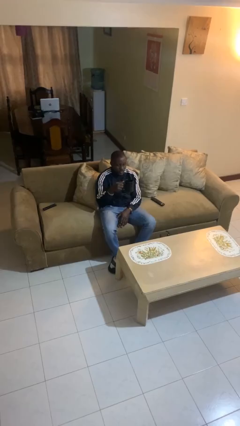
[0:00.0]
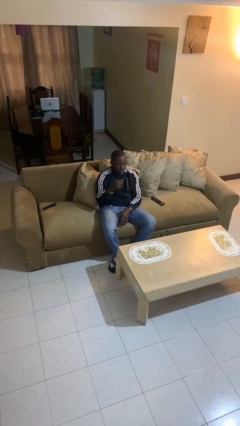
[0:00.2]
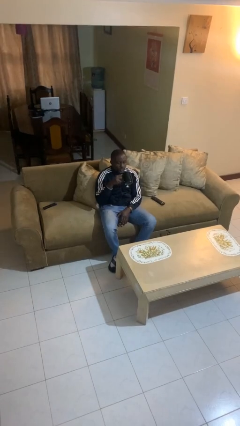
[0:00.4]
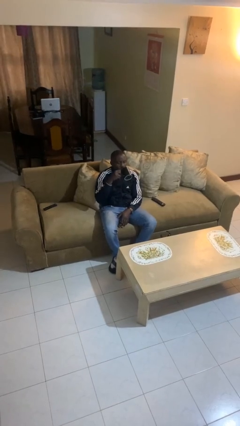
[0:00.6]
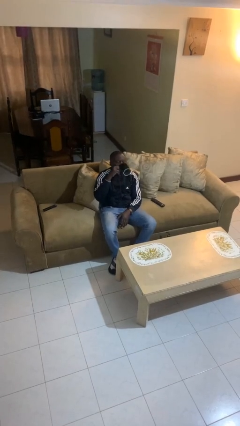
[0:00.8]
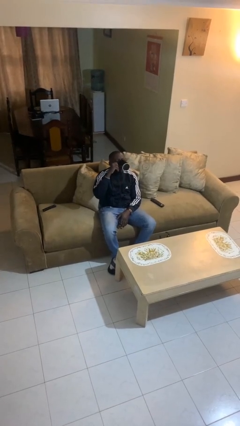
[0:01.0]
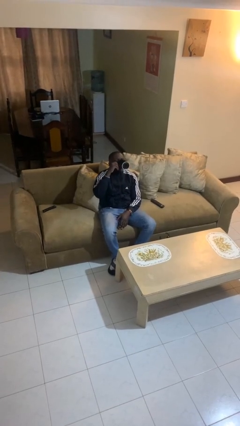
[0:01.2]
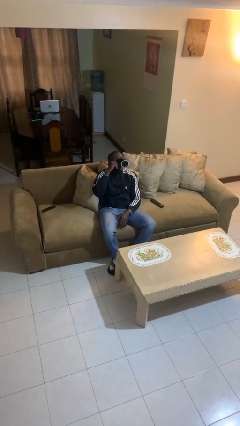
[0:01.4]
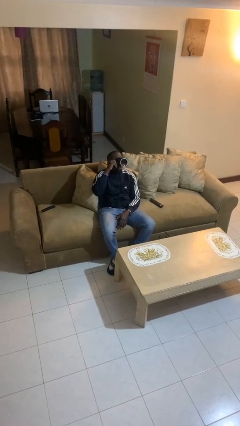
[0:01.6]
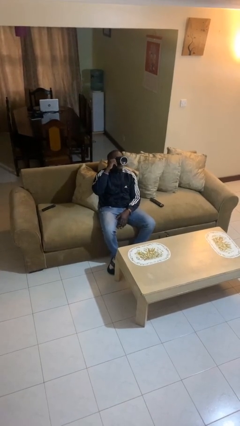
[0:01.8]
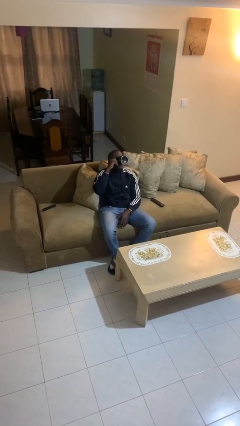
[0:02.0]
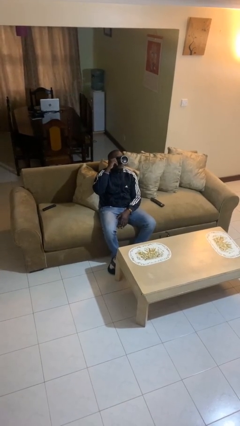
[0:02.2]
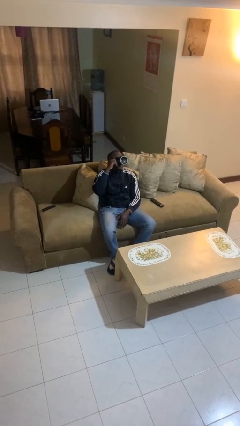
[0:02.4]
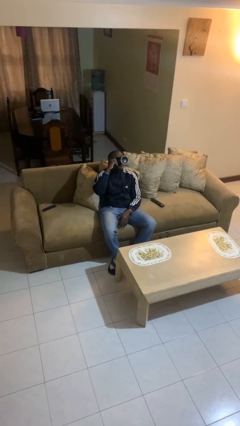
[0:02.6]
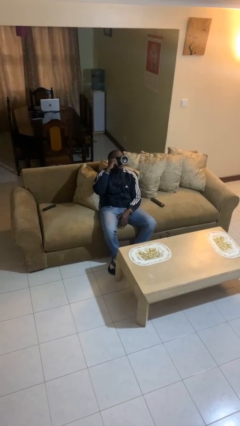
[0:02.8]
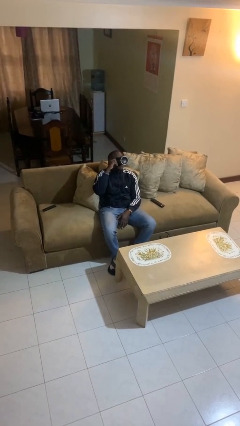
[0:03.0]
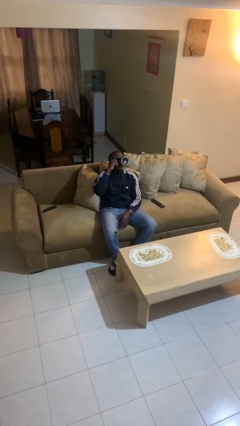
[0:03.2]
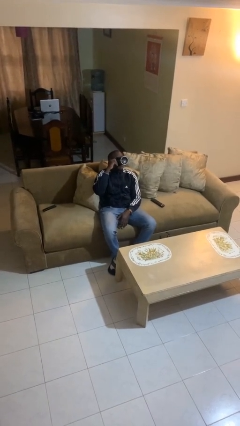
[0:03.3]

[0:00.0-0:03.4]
person drinks from mug

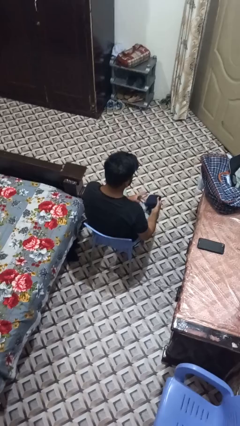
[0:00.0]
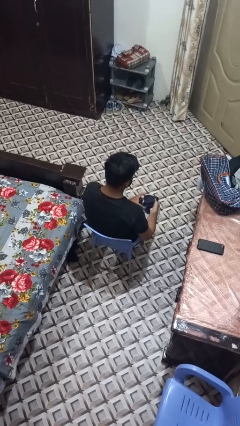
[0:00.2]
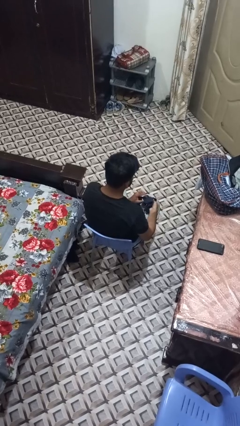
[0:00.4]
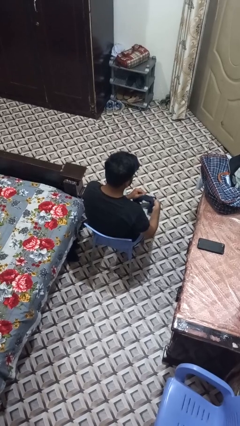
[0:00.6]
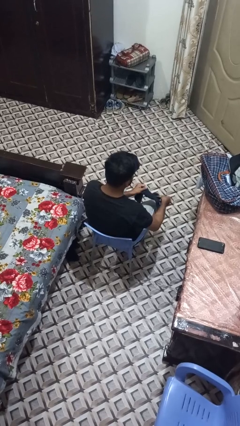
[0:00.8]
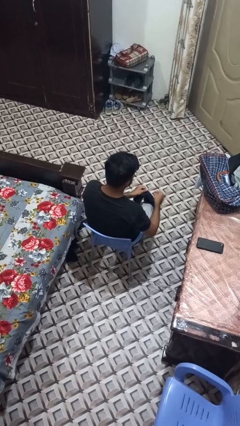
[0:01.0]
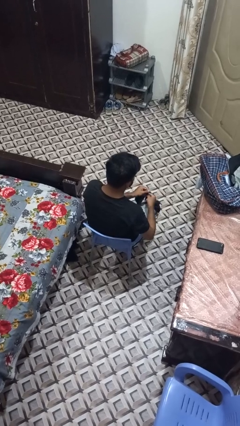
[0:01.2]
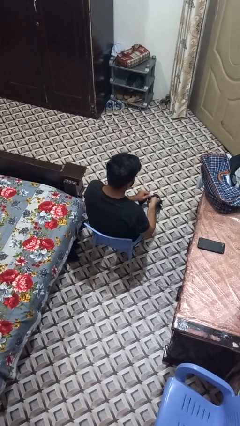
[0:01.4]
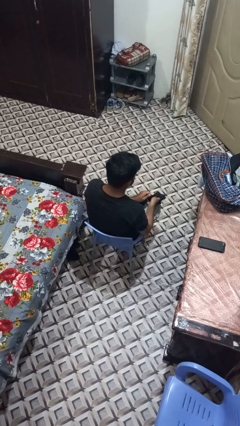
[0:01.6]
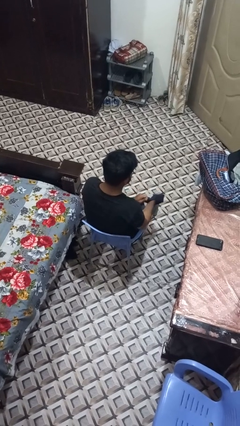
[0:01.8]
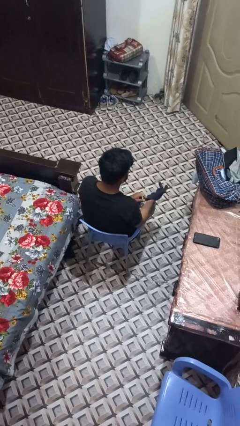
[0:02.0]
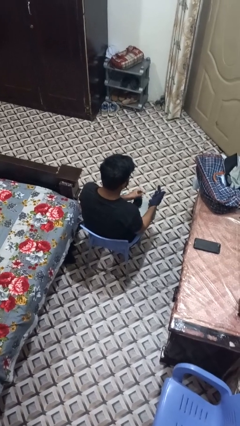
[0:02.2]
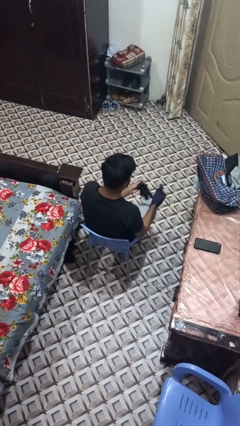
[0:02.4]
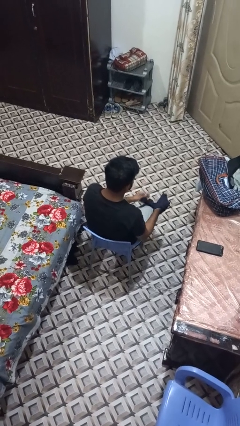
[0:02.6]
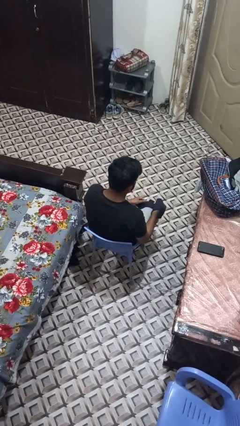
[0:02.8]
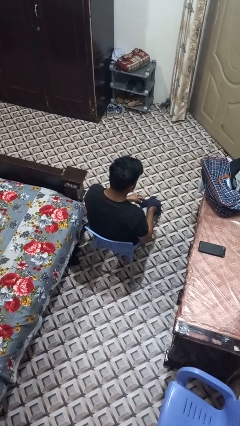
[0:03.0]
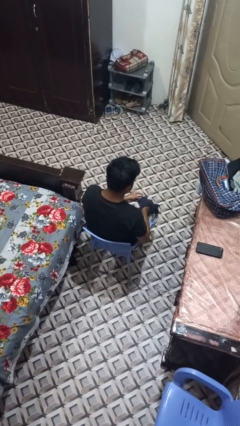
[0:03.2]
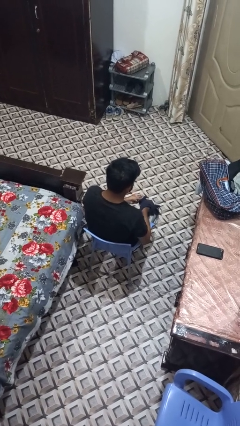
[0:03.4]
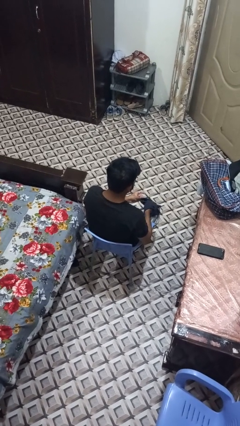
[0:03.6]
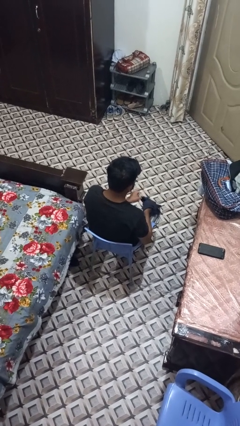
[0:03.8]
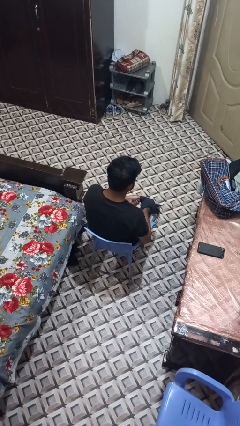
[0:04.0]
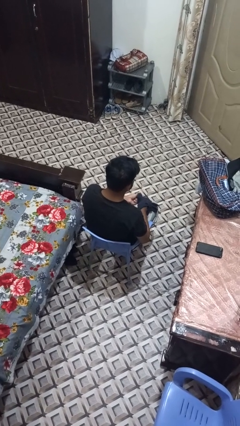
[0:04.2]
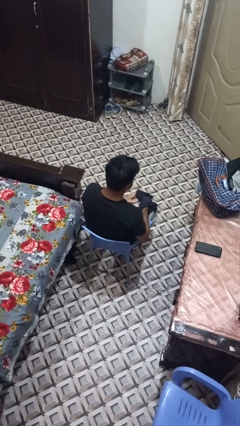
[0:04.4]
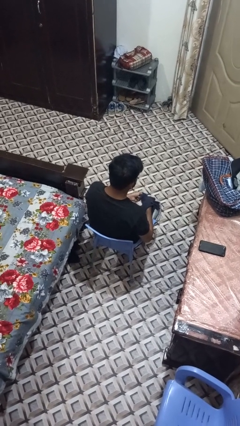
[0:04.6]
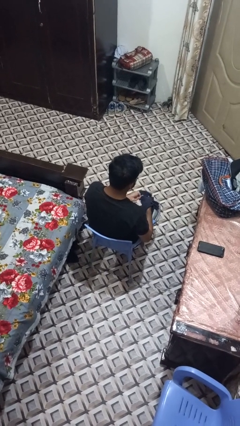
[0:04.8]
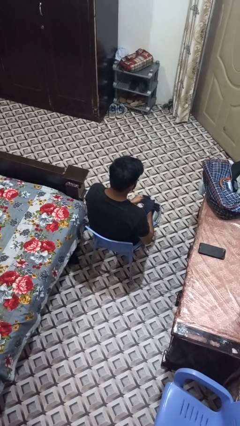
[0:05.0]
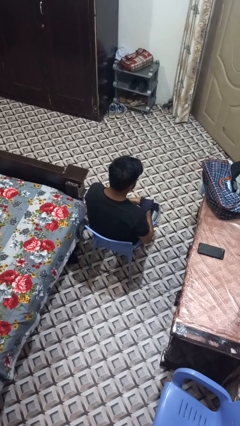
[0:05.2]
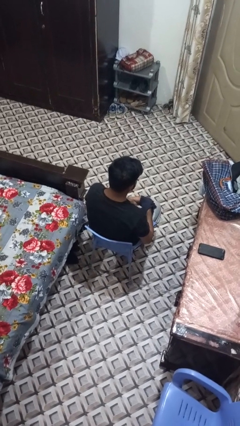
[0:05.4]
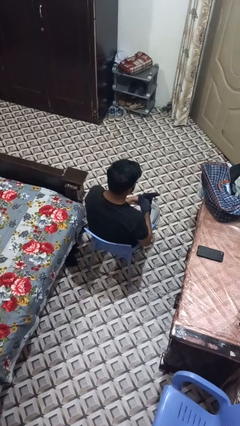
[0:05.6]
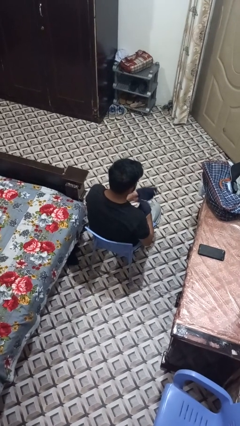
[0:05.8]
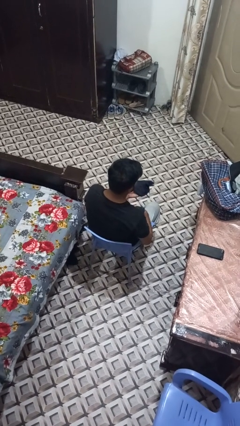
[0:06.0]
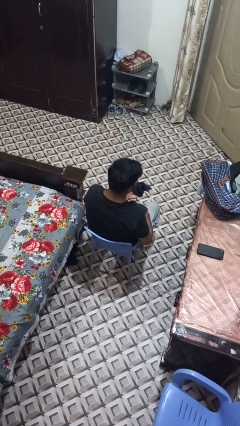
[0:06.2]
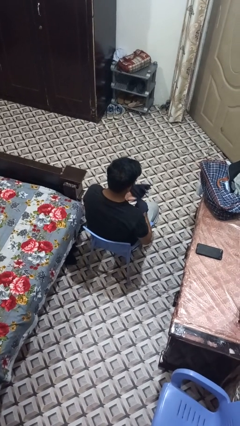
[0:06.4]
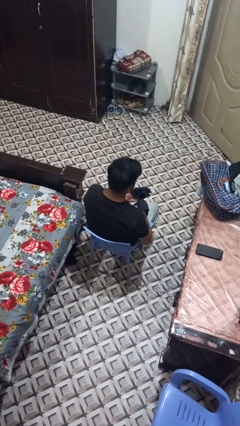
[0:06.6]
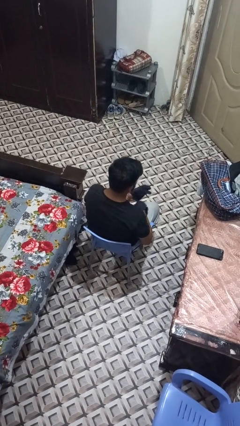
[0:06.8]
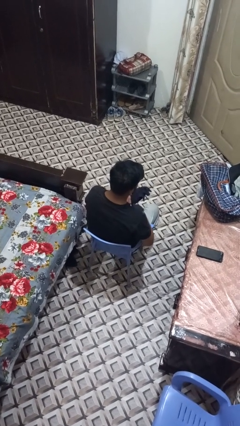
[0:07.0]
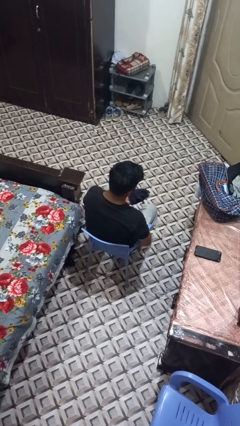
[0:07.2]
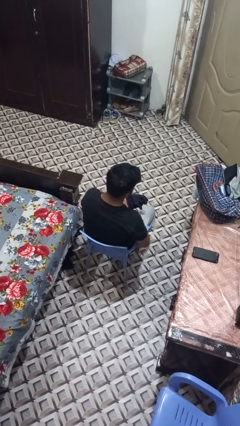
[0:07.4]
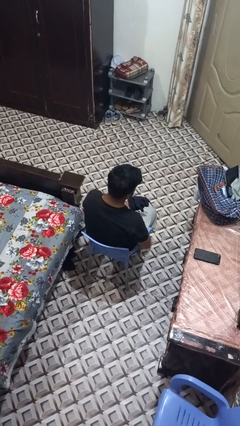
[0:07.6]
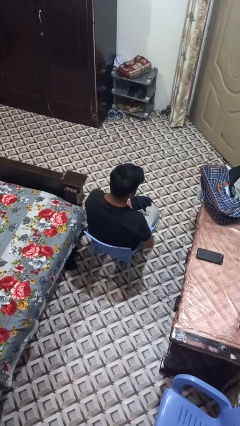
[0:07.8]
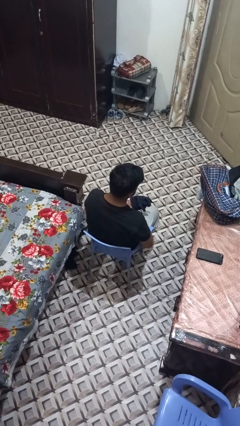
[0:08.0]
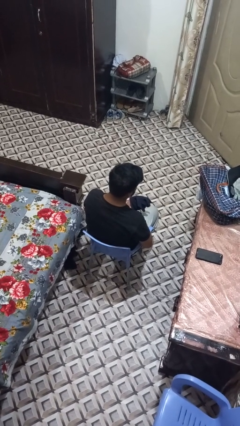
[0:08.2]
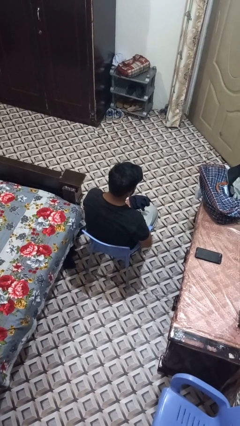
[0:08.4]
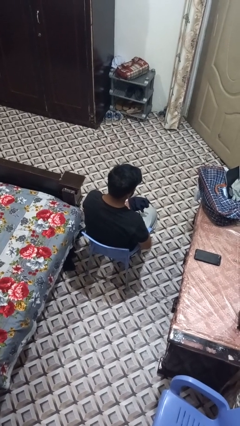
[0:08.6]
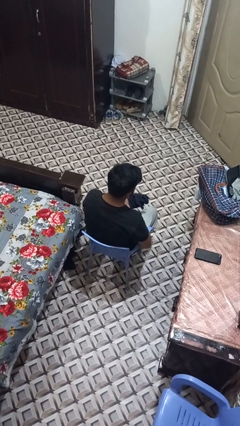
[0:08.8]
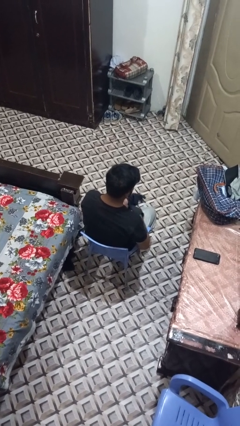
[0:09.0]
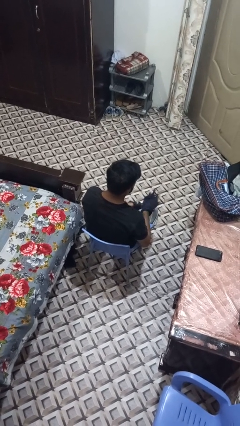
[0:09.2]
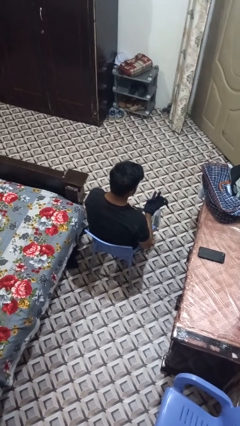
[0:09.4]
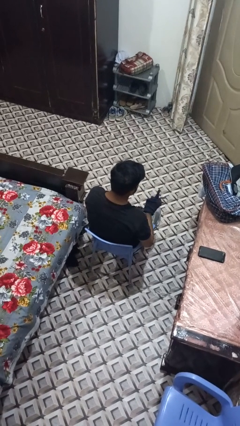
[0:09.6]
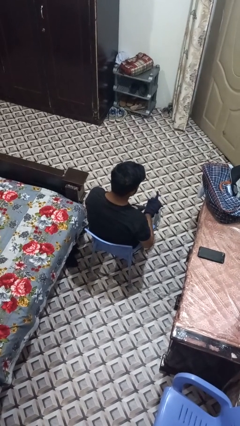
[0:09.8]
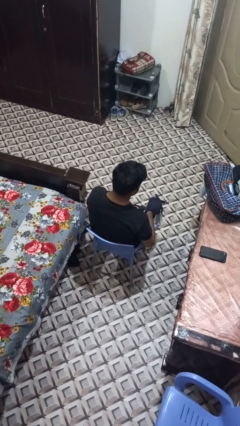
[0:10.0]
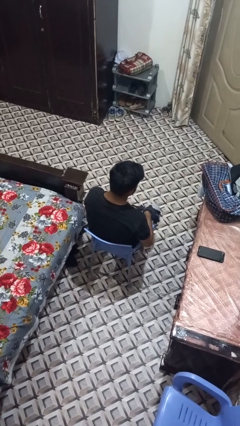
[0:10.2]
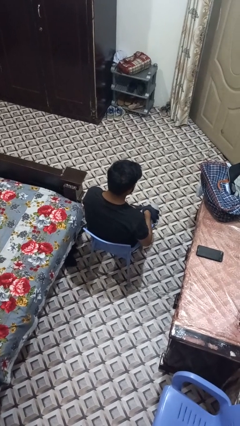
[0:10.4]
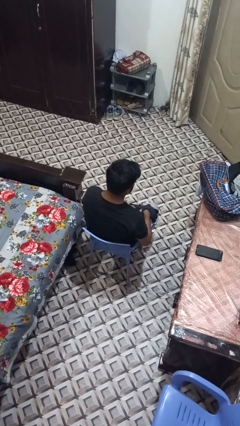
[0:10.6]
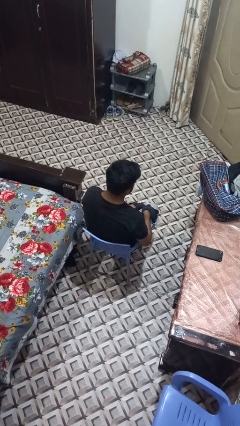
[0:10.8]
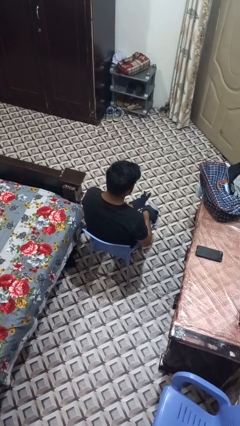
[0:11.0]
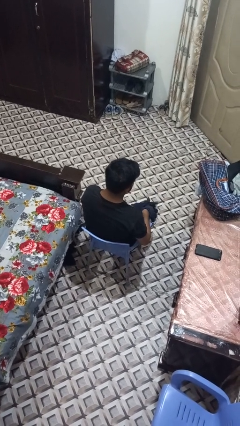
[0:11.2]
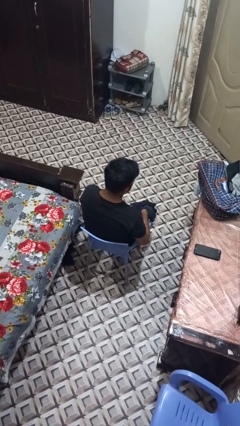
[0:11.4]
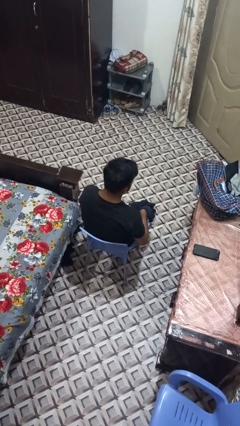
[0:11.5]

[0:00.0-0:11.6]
person puts on gloves

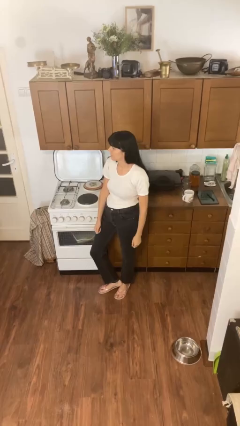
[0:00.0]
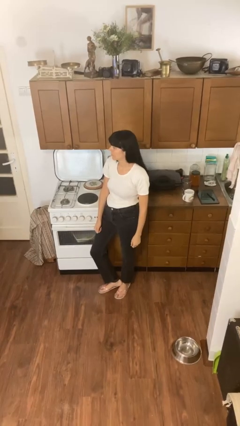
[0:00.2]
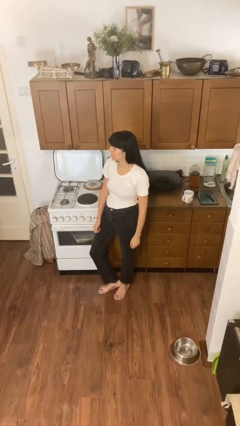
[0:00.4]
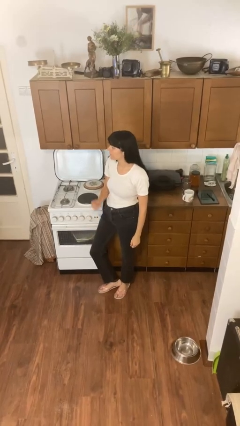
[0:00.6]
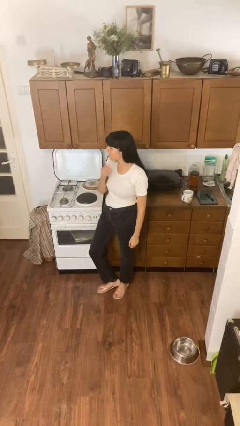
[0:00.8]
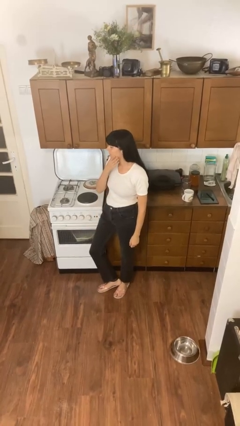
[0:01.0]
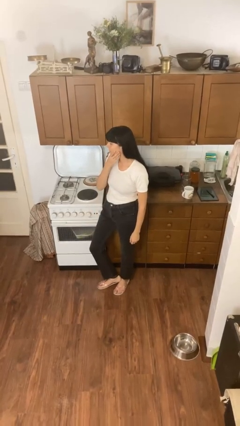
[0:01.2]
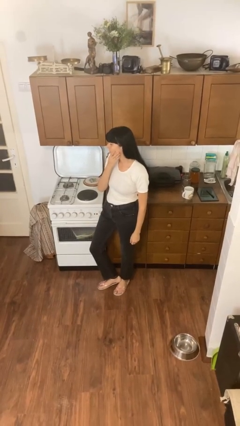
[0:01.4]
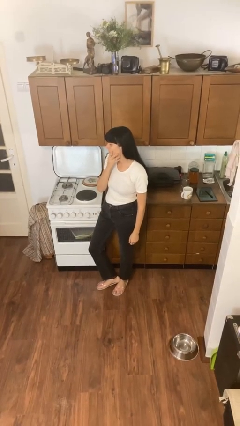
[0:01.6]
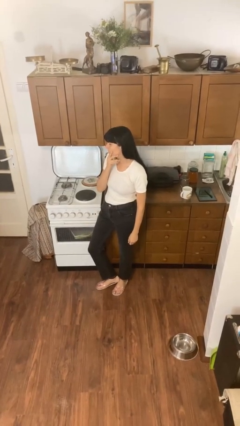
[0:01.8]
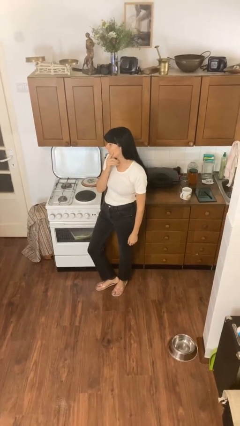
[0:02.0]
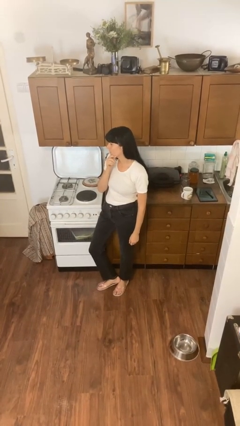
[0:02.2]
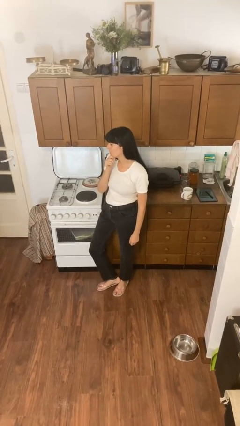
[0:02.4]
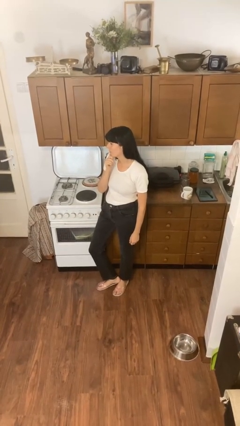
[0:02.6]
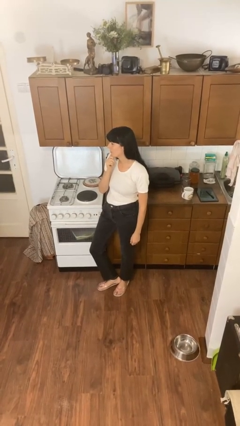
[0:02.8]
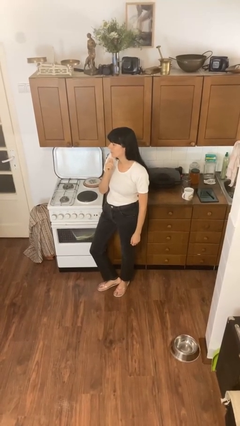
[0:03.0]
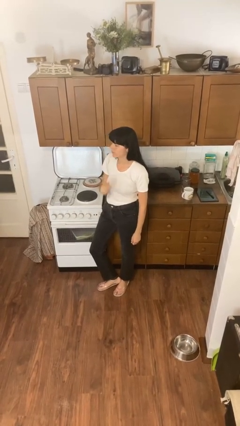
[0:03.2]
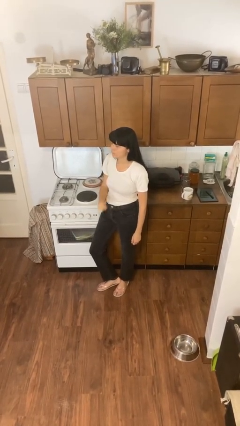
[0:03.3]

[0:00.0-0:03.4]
person strokes chin
